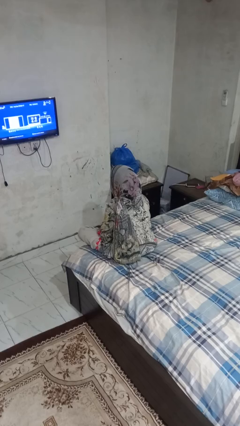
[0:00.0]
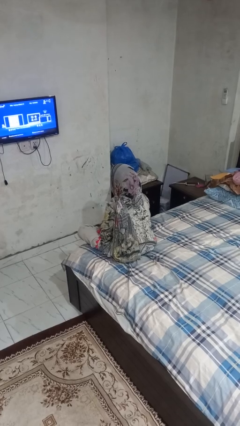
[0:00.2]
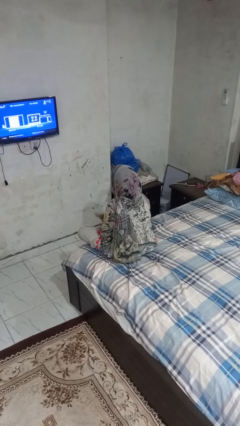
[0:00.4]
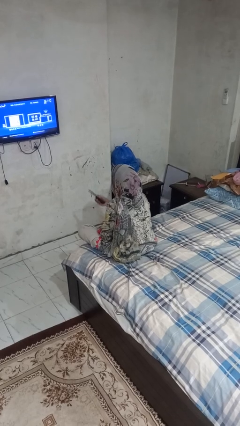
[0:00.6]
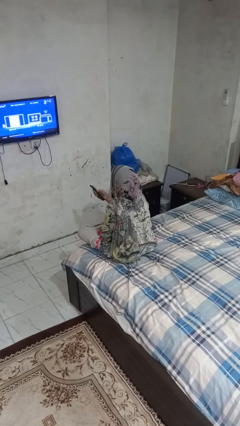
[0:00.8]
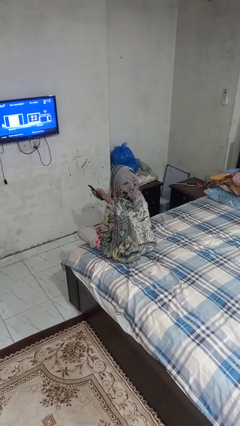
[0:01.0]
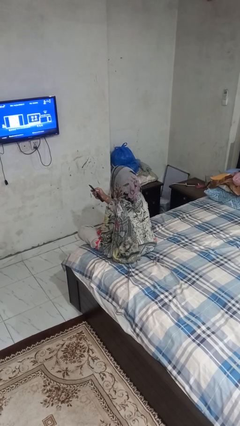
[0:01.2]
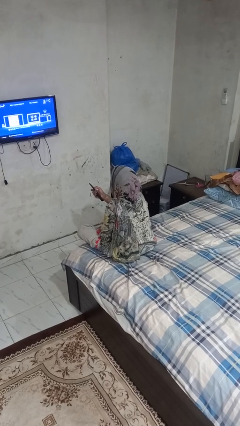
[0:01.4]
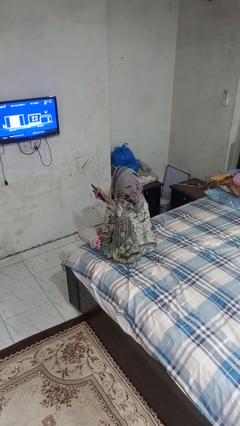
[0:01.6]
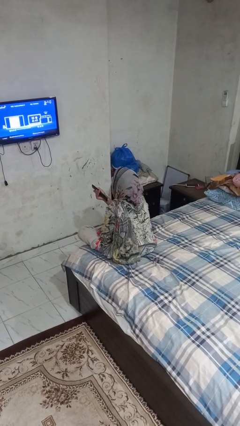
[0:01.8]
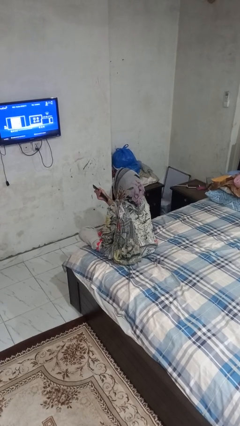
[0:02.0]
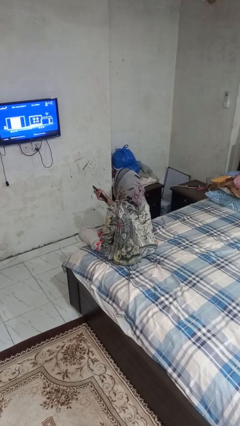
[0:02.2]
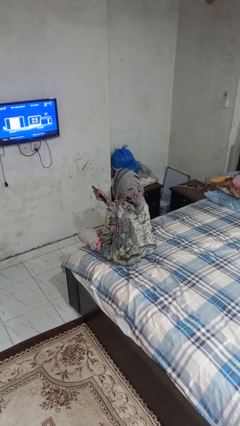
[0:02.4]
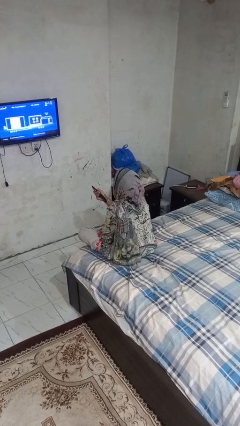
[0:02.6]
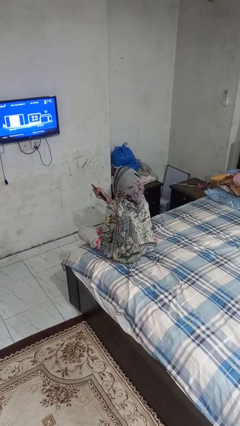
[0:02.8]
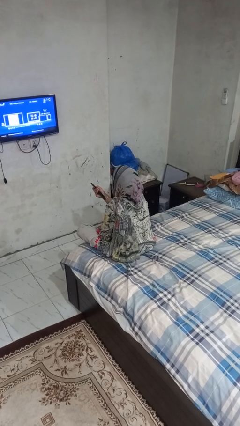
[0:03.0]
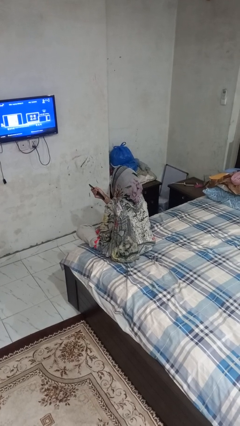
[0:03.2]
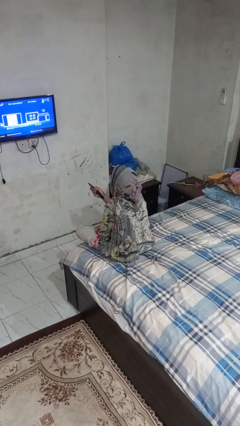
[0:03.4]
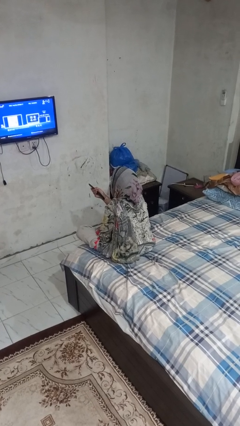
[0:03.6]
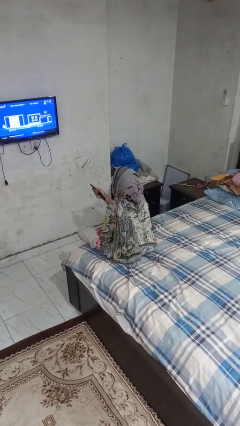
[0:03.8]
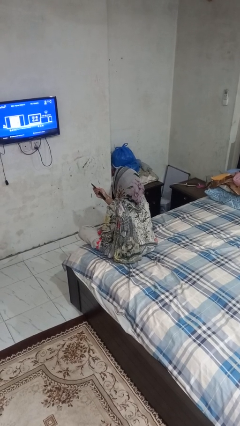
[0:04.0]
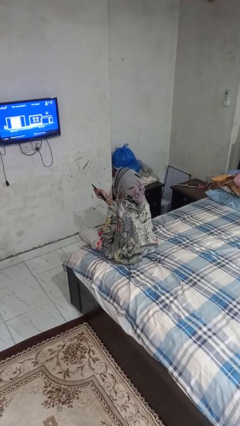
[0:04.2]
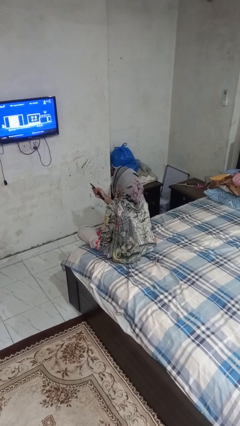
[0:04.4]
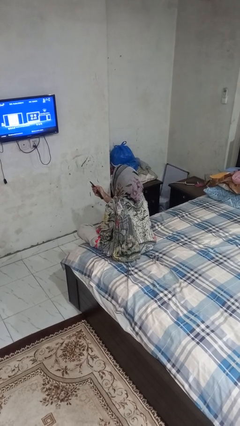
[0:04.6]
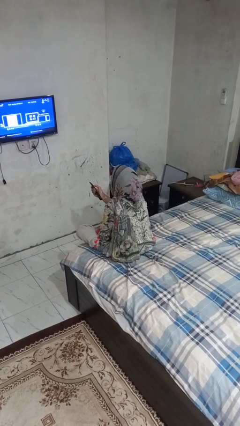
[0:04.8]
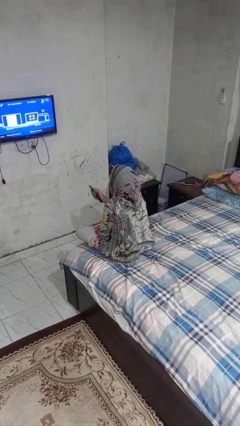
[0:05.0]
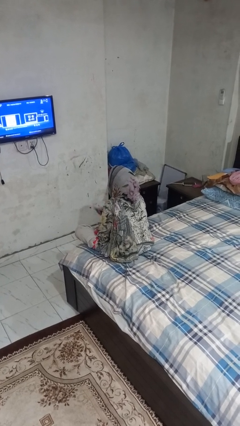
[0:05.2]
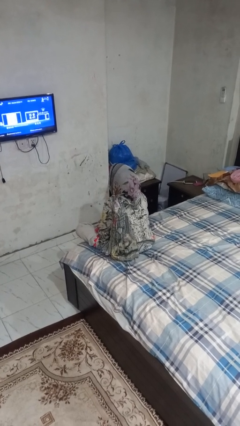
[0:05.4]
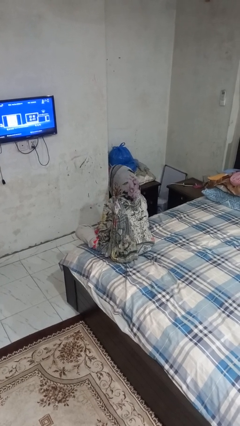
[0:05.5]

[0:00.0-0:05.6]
person uses television remote

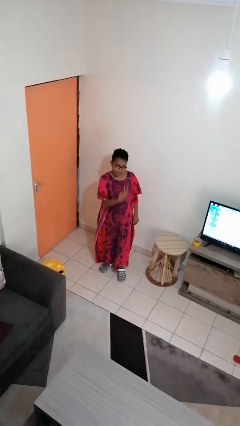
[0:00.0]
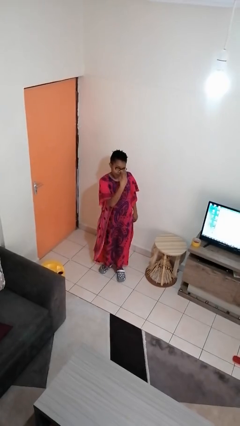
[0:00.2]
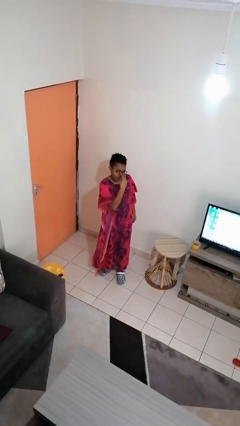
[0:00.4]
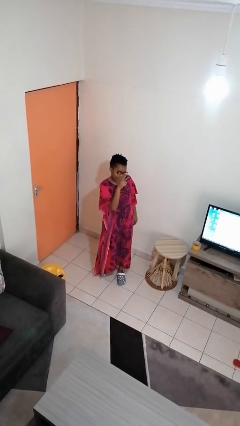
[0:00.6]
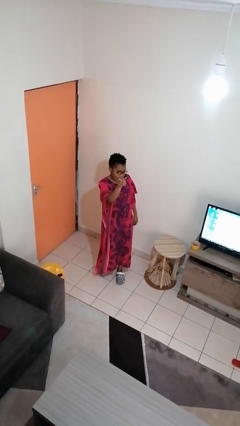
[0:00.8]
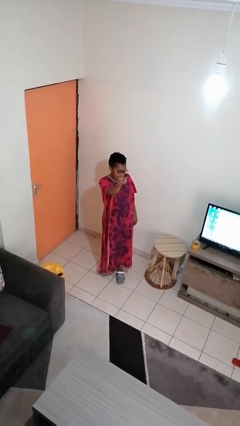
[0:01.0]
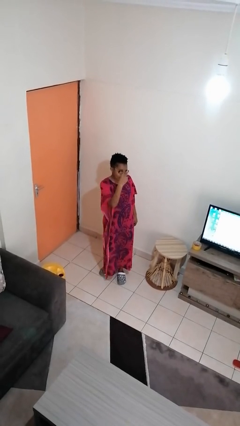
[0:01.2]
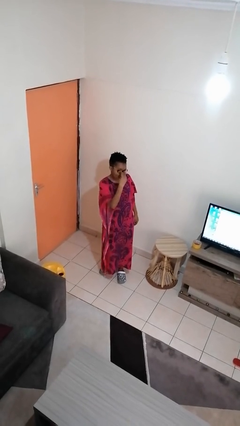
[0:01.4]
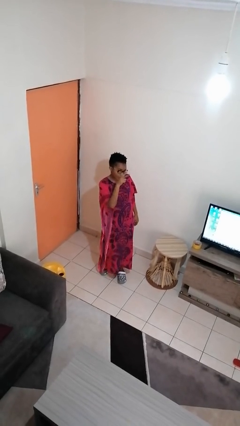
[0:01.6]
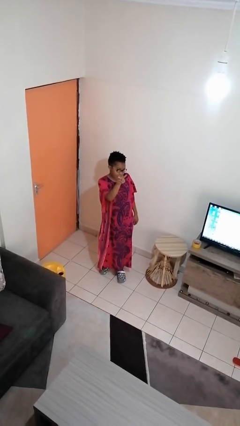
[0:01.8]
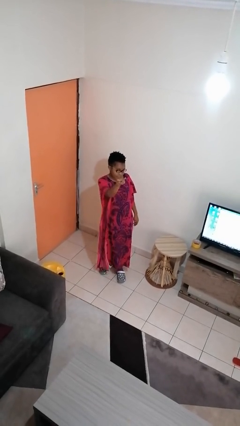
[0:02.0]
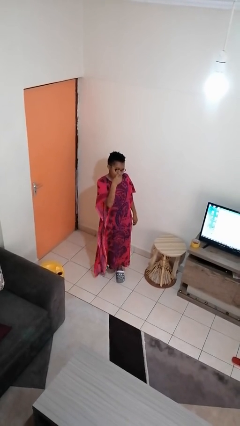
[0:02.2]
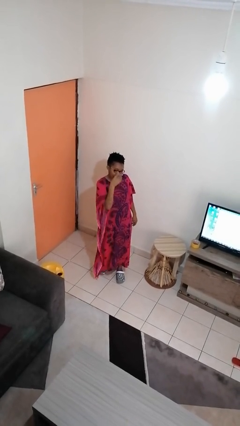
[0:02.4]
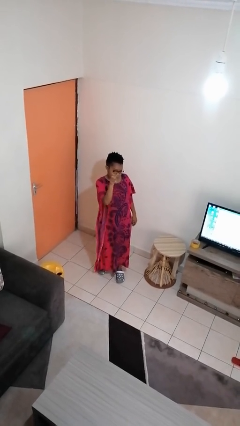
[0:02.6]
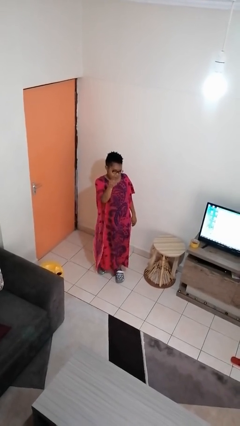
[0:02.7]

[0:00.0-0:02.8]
person gestures watch closely

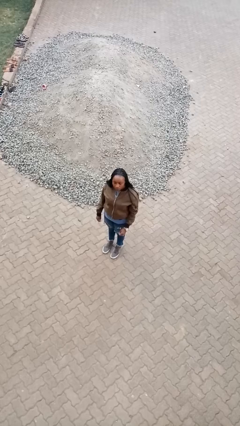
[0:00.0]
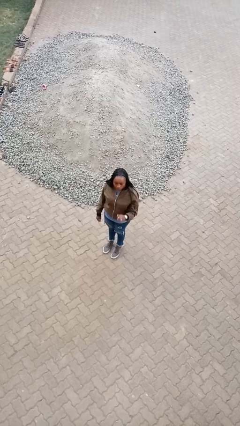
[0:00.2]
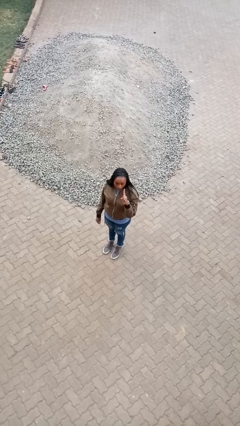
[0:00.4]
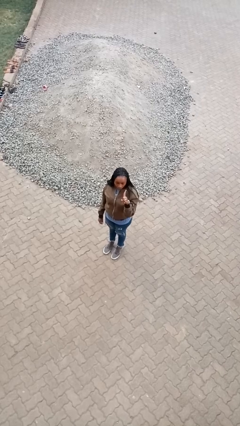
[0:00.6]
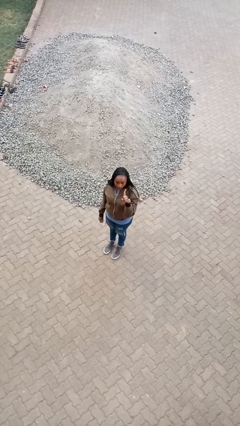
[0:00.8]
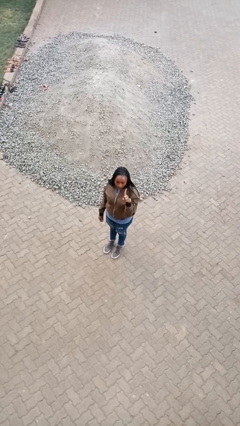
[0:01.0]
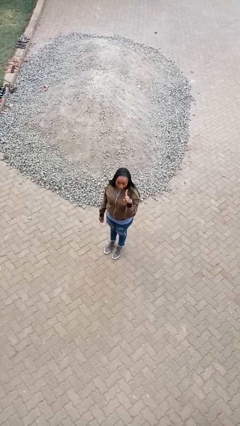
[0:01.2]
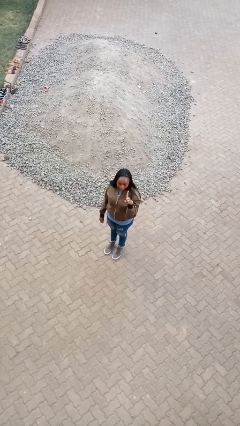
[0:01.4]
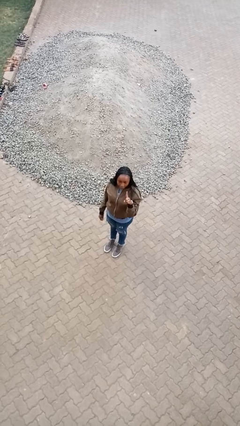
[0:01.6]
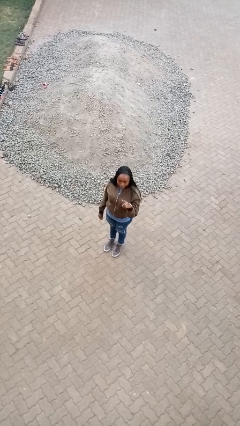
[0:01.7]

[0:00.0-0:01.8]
person gestures number one

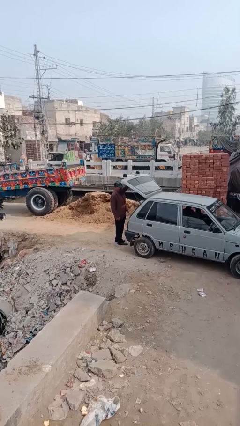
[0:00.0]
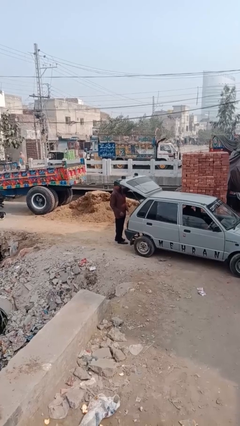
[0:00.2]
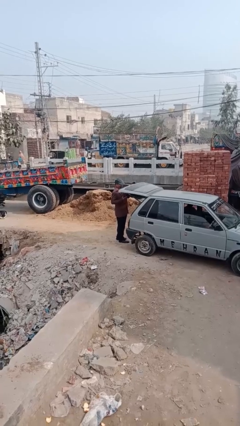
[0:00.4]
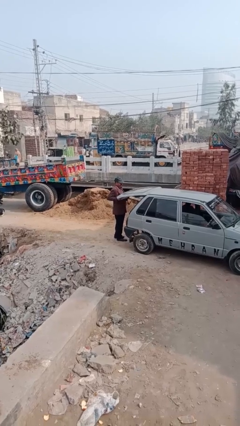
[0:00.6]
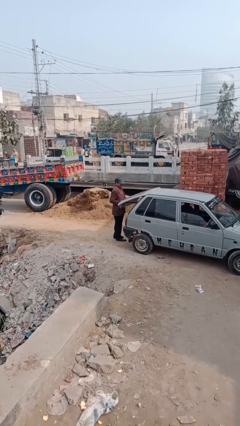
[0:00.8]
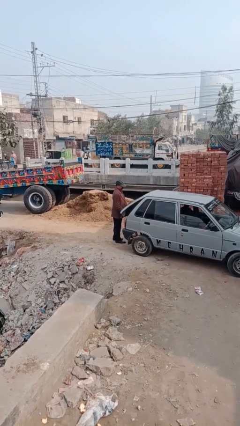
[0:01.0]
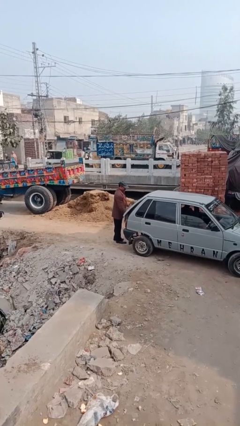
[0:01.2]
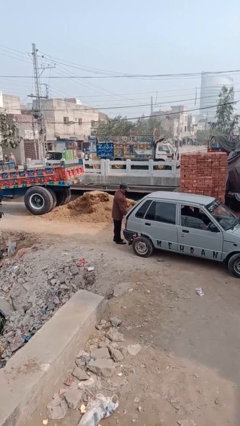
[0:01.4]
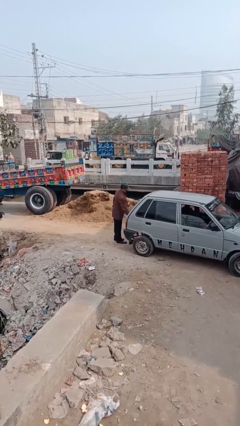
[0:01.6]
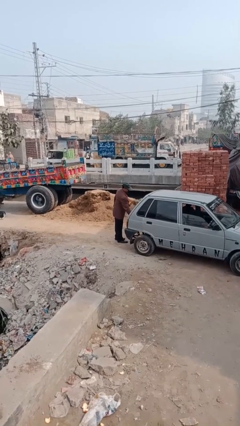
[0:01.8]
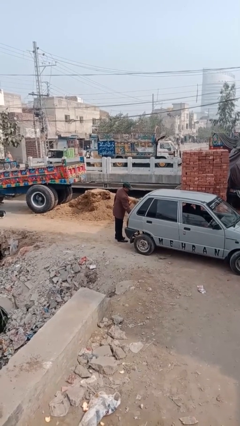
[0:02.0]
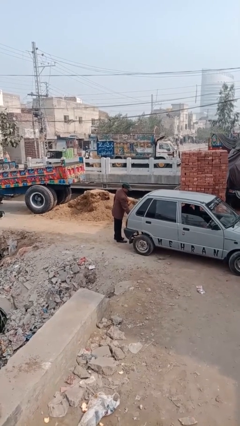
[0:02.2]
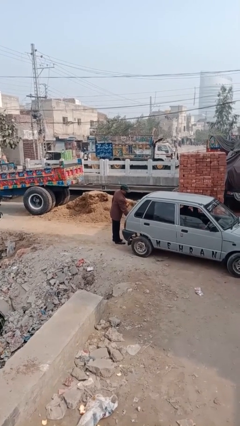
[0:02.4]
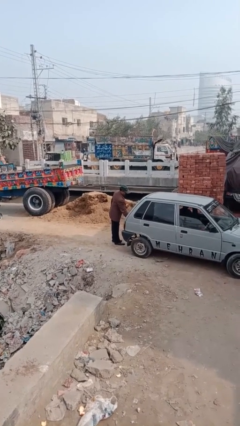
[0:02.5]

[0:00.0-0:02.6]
person closes car trunk

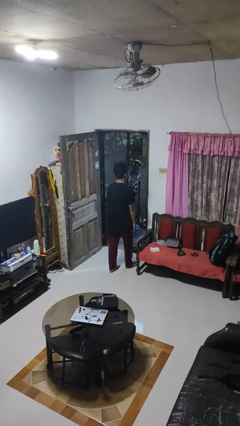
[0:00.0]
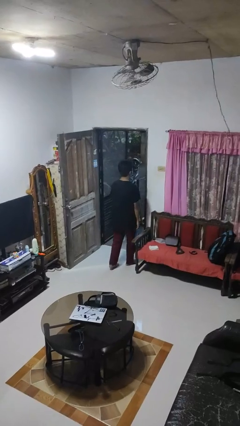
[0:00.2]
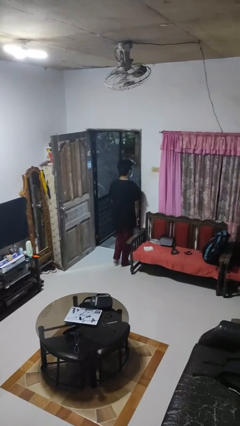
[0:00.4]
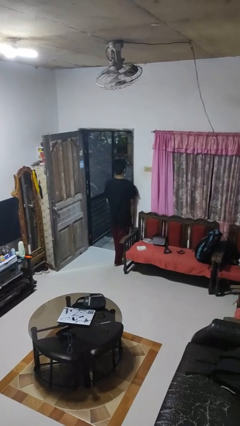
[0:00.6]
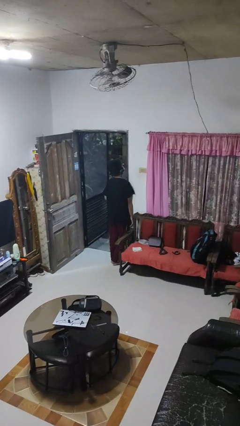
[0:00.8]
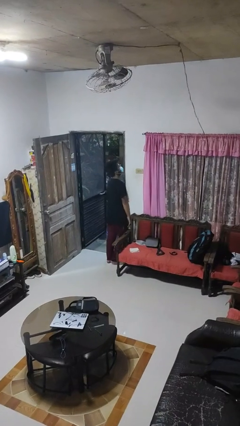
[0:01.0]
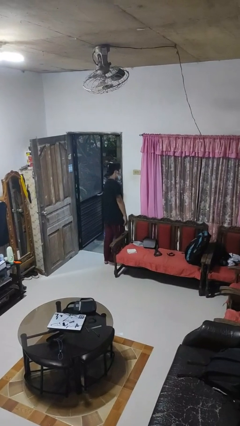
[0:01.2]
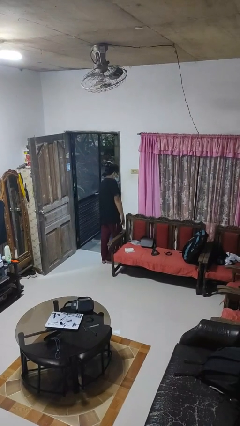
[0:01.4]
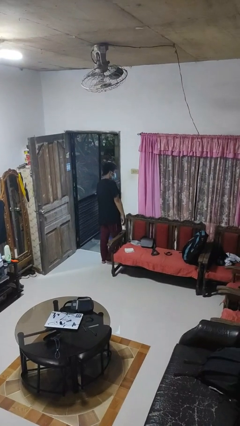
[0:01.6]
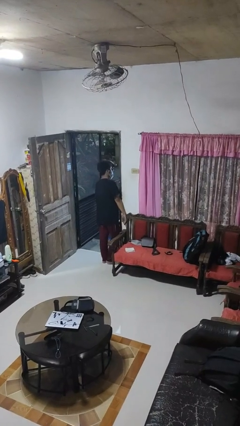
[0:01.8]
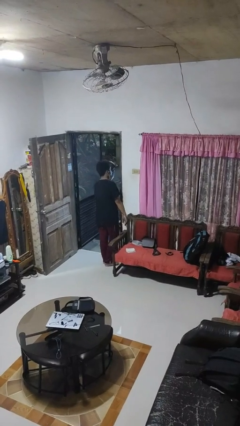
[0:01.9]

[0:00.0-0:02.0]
person bumps into wall

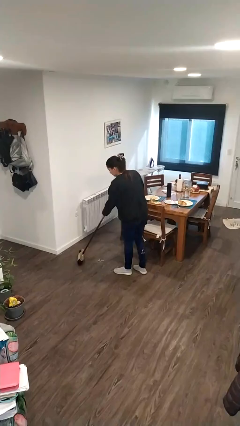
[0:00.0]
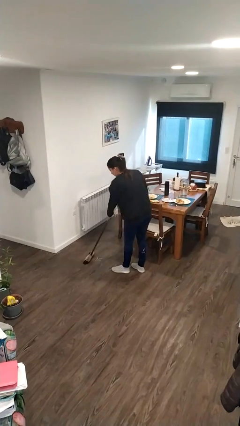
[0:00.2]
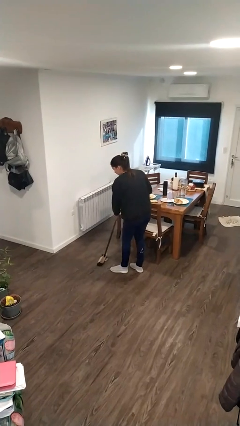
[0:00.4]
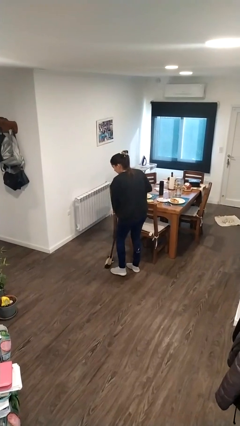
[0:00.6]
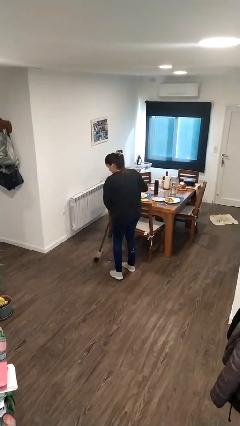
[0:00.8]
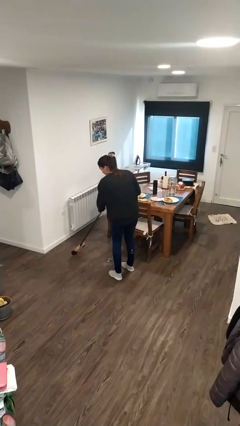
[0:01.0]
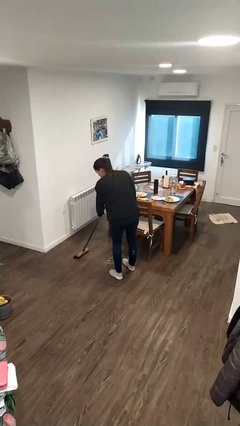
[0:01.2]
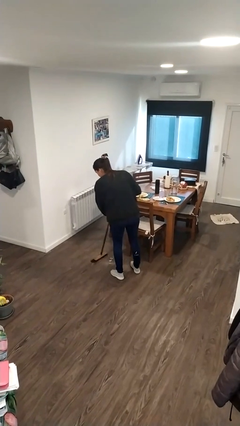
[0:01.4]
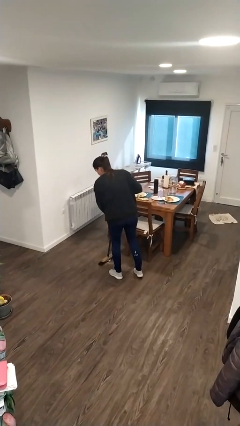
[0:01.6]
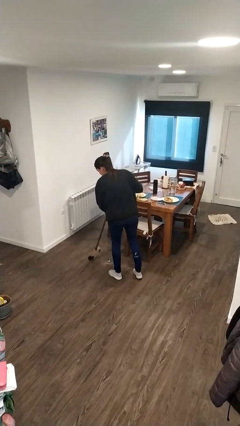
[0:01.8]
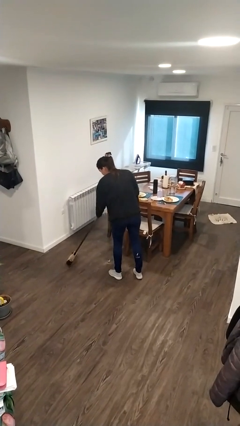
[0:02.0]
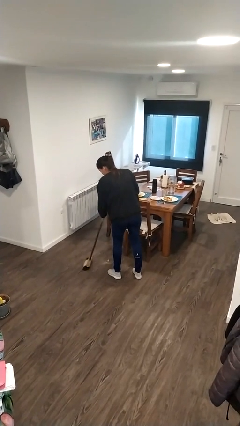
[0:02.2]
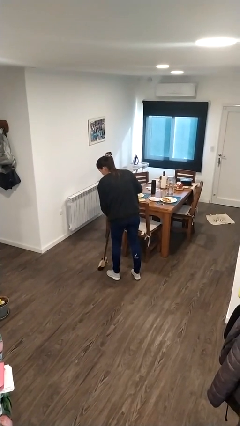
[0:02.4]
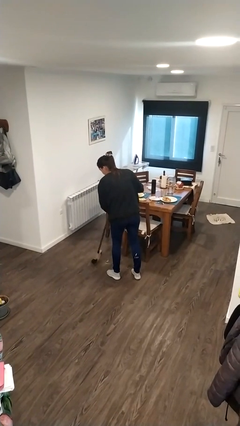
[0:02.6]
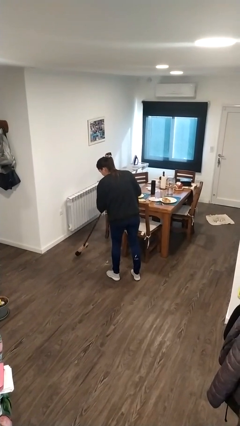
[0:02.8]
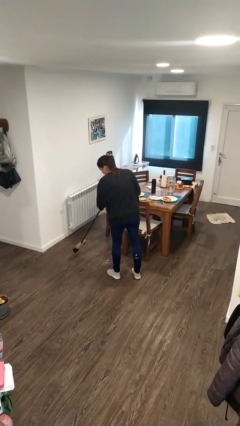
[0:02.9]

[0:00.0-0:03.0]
person sweeps floor
